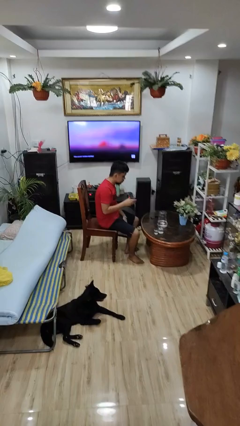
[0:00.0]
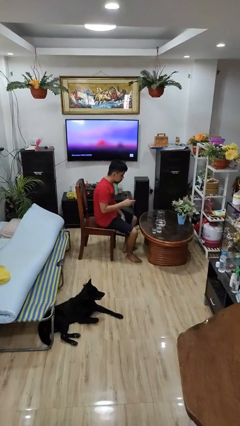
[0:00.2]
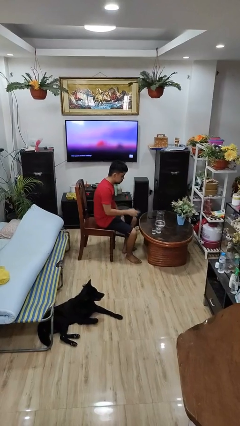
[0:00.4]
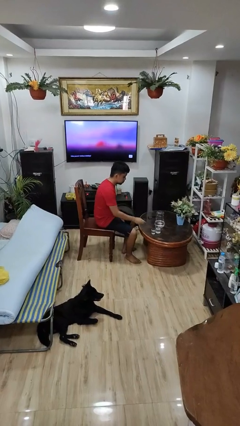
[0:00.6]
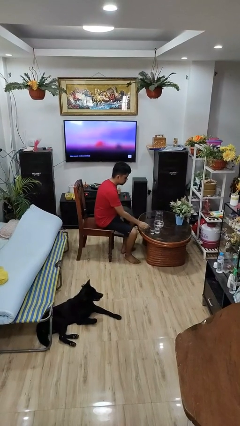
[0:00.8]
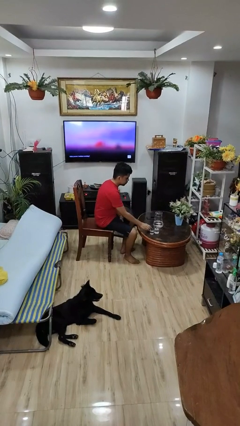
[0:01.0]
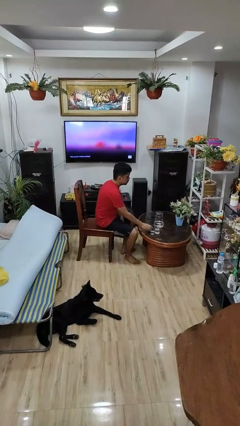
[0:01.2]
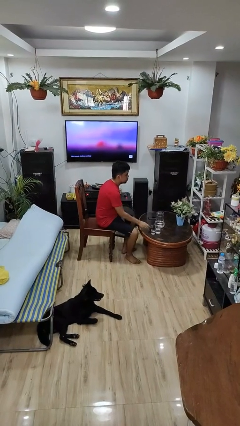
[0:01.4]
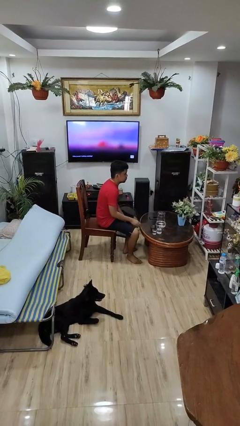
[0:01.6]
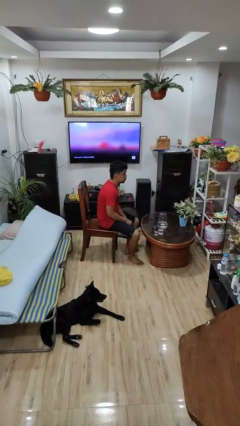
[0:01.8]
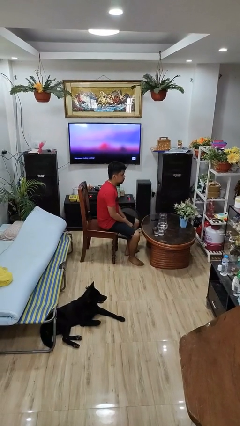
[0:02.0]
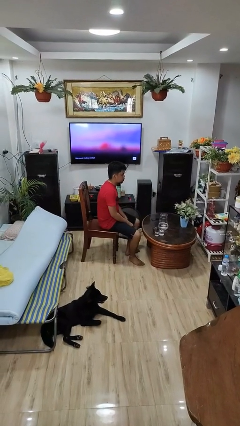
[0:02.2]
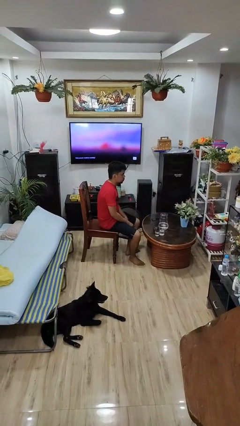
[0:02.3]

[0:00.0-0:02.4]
person puts down object on table

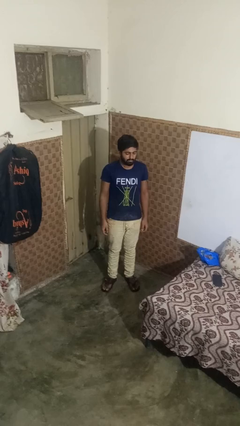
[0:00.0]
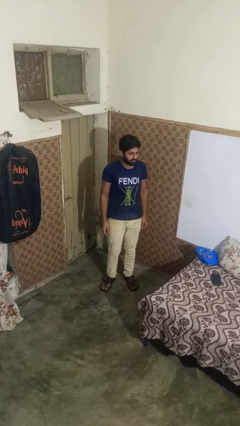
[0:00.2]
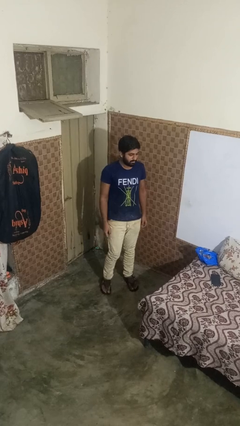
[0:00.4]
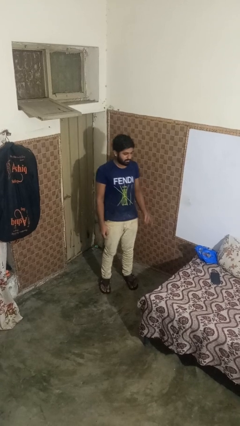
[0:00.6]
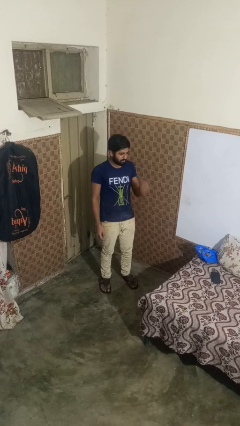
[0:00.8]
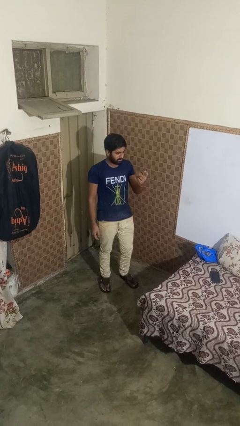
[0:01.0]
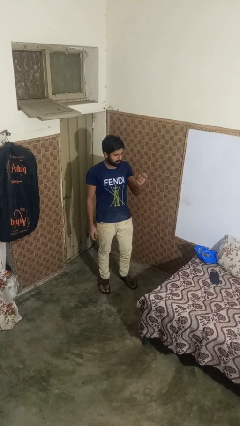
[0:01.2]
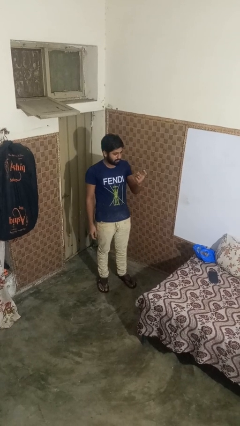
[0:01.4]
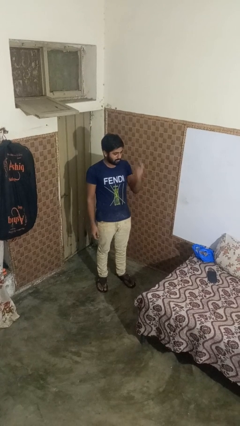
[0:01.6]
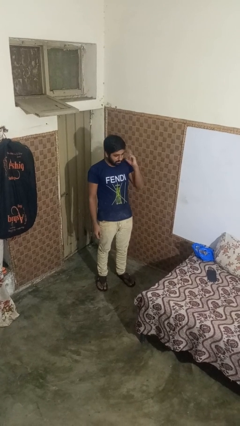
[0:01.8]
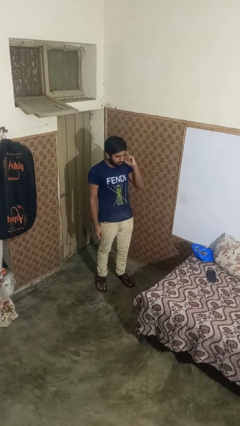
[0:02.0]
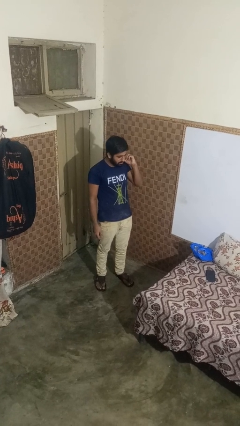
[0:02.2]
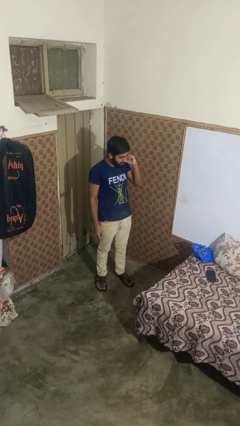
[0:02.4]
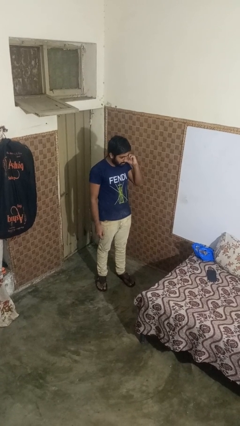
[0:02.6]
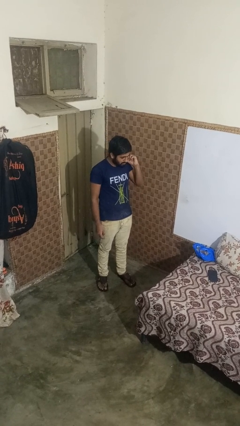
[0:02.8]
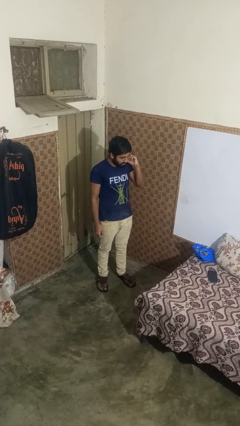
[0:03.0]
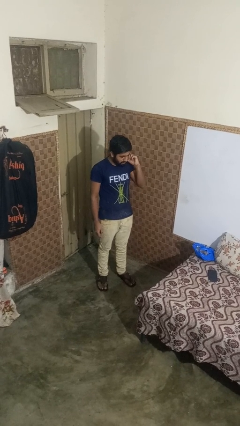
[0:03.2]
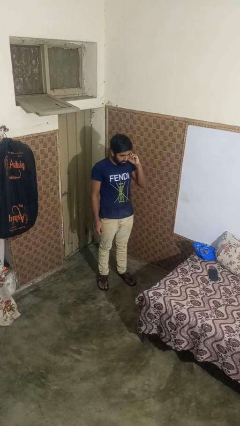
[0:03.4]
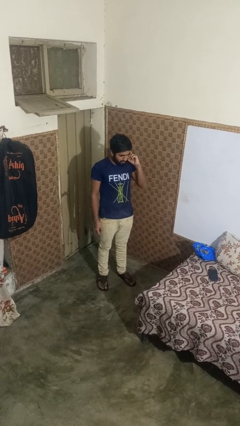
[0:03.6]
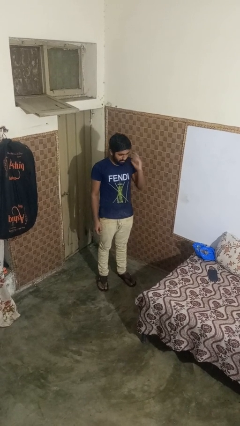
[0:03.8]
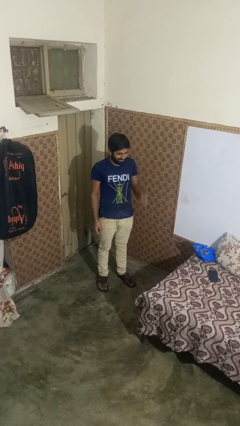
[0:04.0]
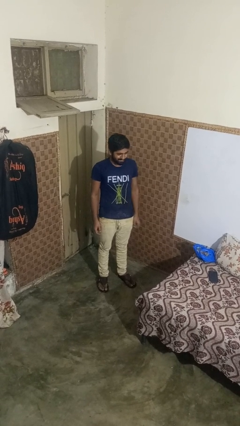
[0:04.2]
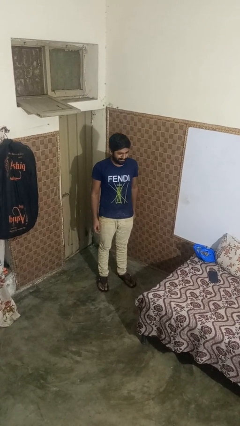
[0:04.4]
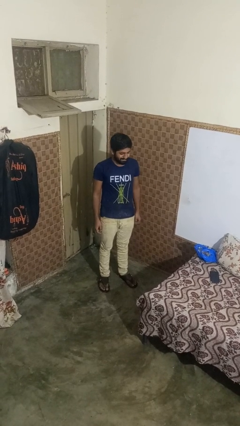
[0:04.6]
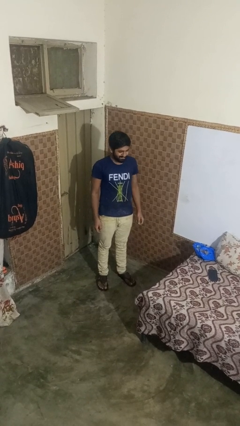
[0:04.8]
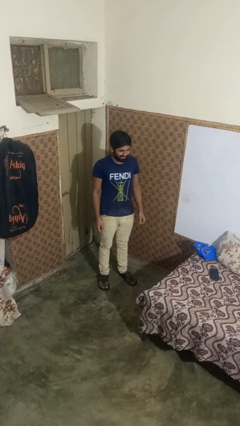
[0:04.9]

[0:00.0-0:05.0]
person gestures listen closely

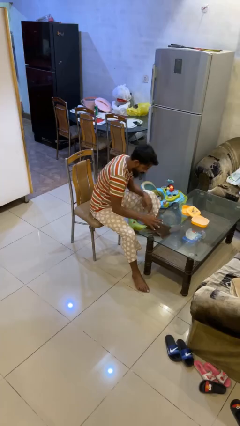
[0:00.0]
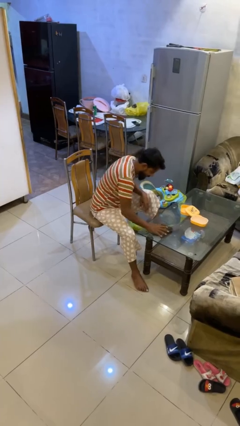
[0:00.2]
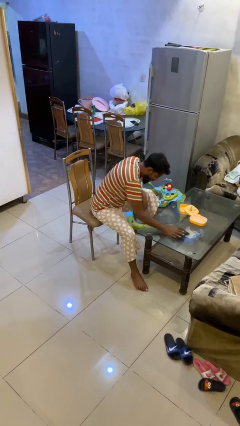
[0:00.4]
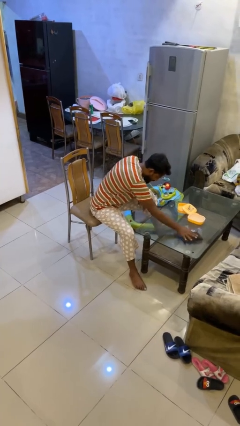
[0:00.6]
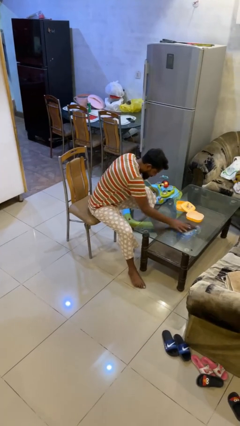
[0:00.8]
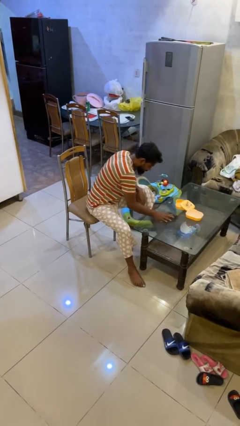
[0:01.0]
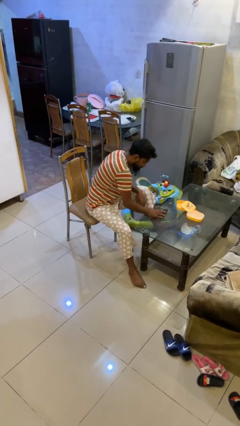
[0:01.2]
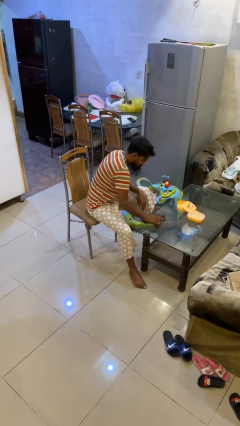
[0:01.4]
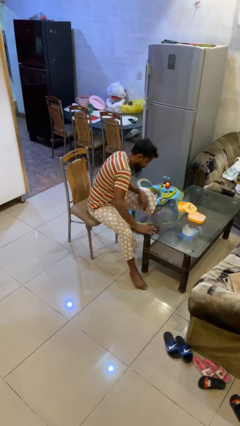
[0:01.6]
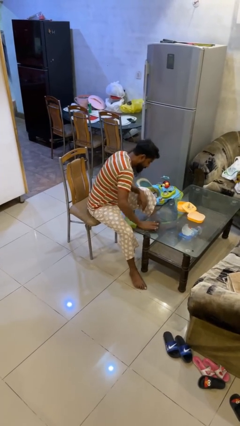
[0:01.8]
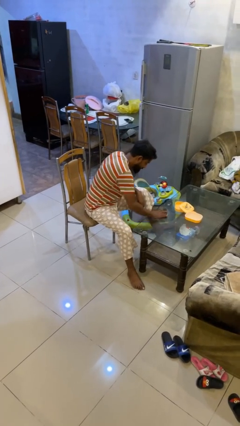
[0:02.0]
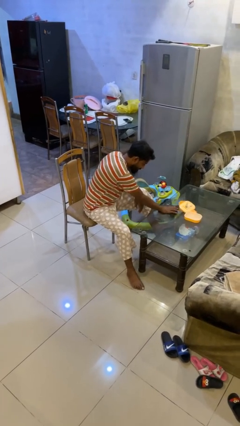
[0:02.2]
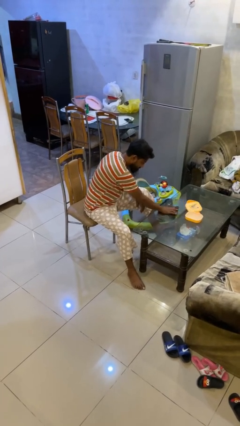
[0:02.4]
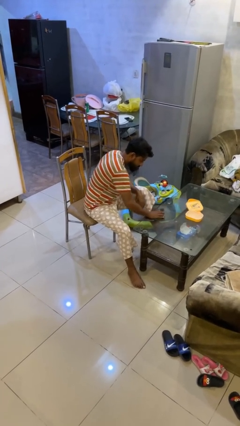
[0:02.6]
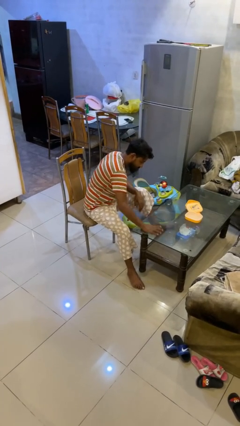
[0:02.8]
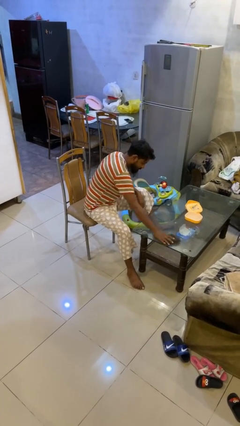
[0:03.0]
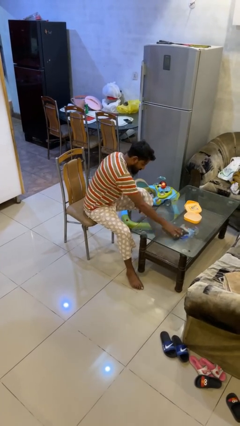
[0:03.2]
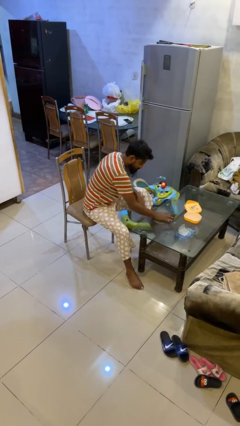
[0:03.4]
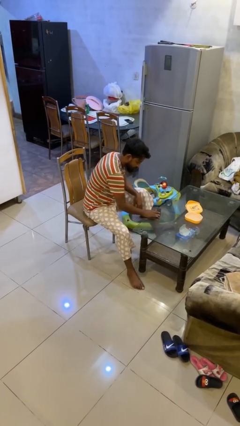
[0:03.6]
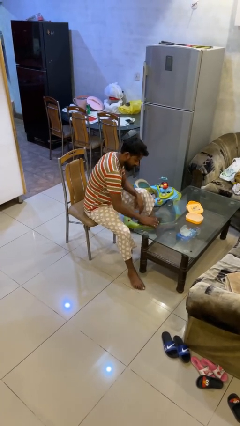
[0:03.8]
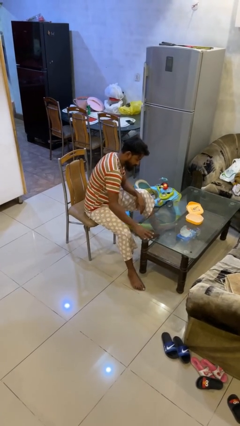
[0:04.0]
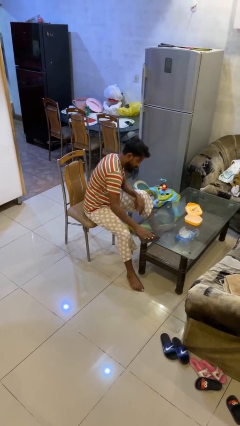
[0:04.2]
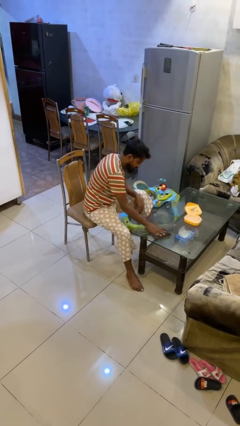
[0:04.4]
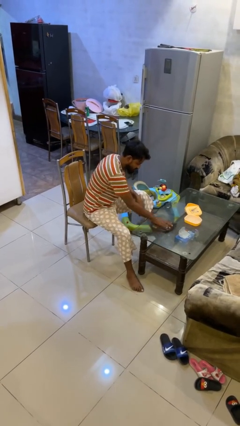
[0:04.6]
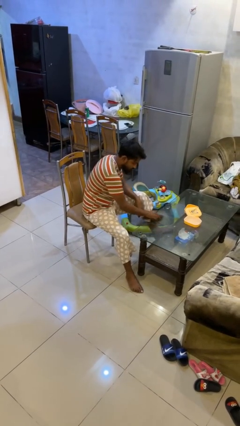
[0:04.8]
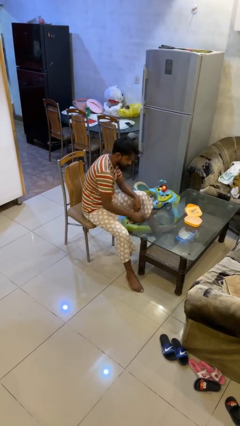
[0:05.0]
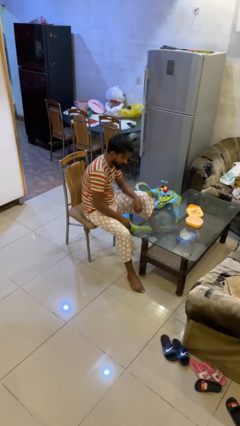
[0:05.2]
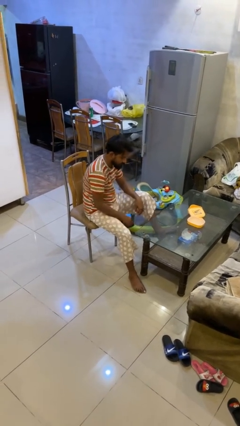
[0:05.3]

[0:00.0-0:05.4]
person cleans table with rag

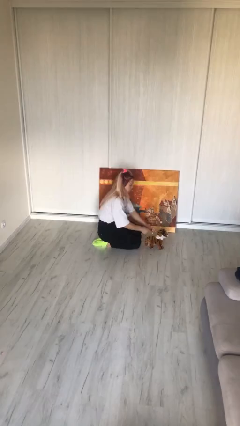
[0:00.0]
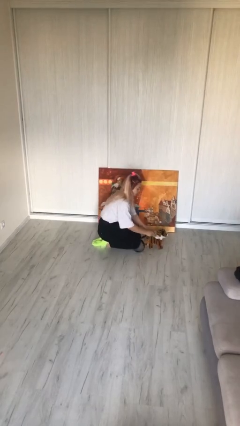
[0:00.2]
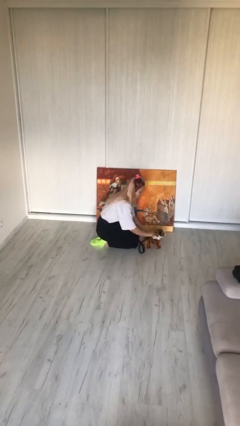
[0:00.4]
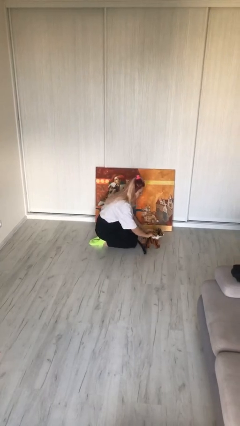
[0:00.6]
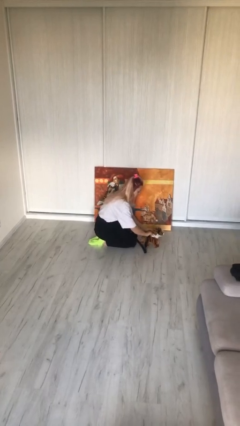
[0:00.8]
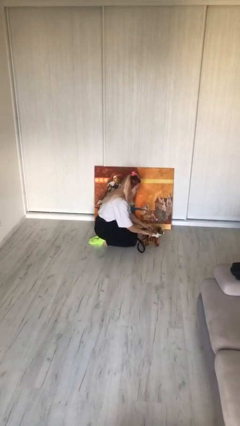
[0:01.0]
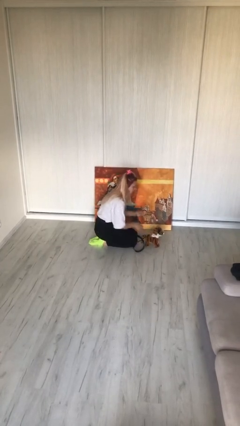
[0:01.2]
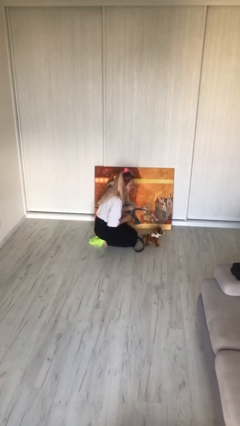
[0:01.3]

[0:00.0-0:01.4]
person attaches leash to dog

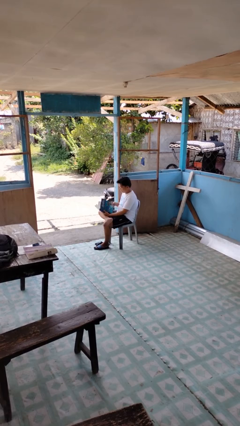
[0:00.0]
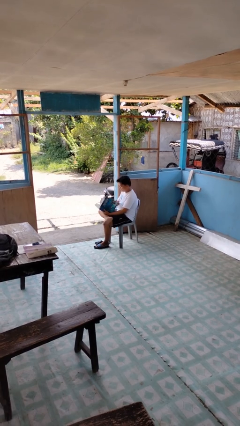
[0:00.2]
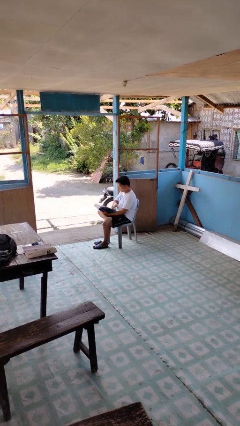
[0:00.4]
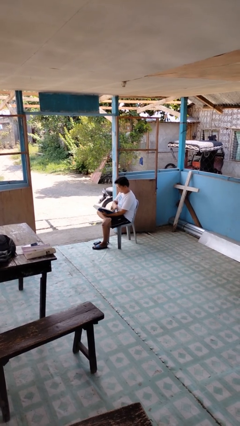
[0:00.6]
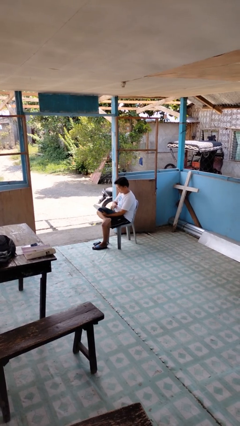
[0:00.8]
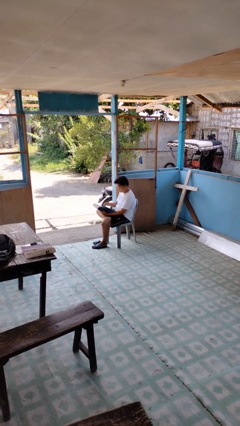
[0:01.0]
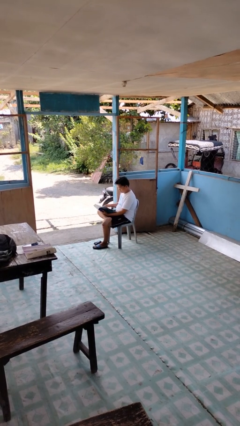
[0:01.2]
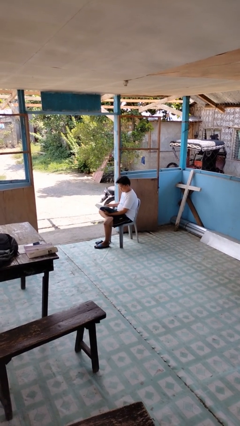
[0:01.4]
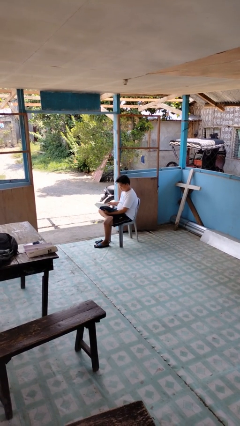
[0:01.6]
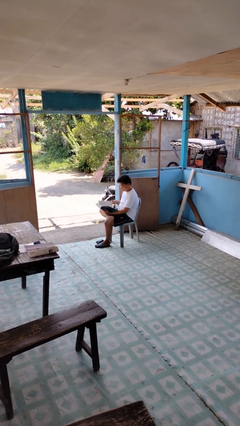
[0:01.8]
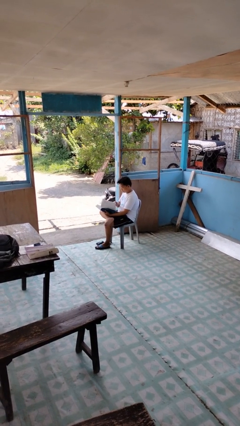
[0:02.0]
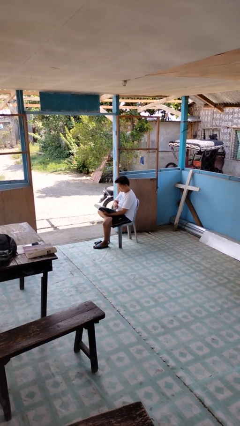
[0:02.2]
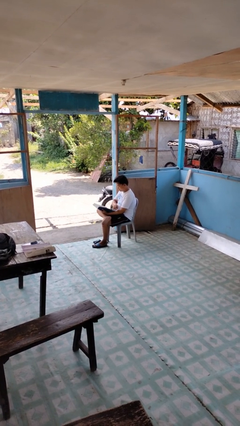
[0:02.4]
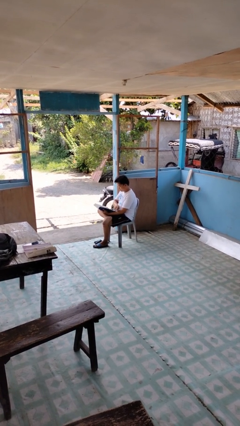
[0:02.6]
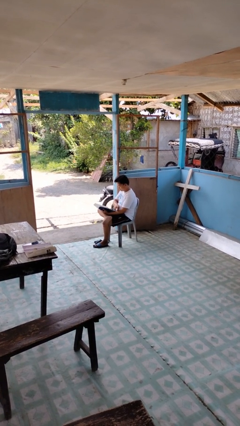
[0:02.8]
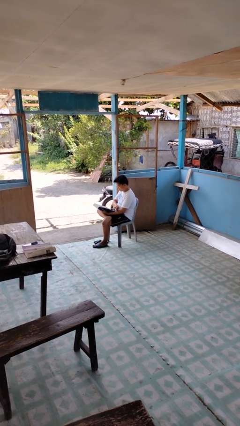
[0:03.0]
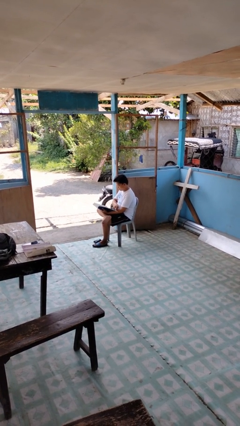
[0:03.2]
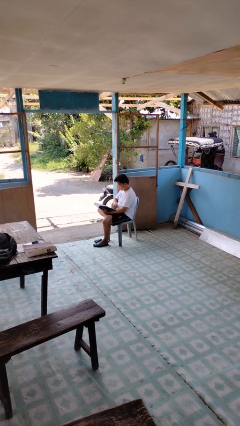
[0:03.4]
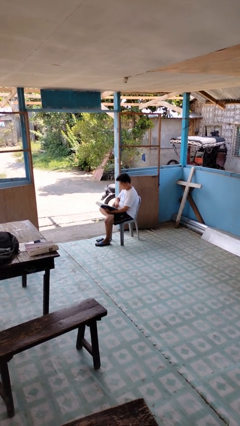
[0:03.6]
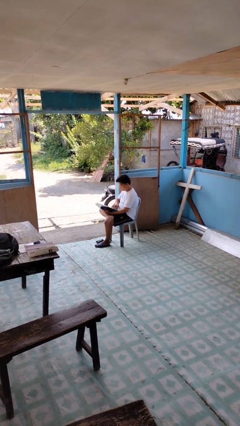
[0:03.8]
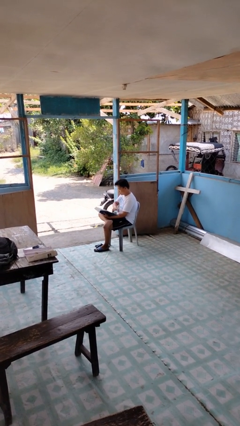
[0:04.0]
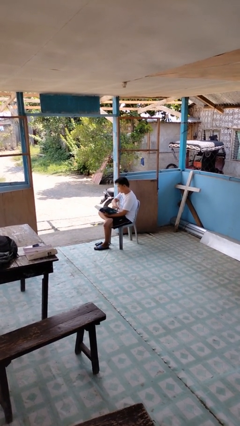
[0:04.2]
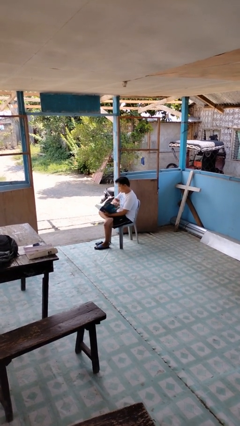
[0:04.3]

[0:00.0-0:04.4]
person reads book
